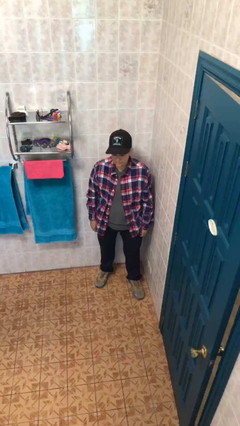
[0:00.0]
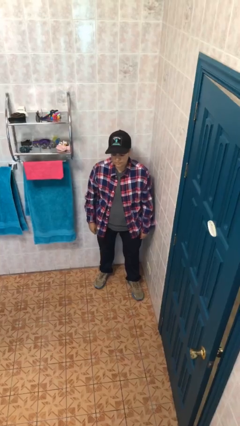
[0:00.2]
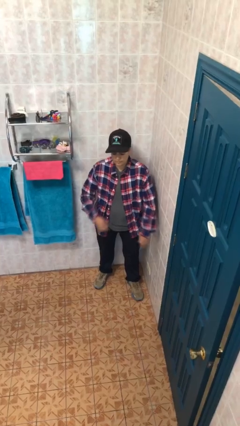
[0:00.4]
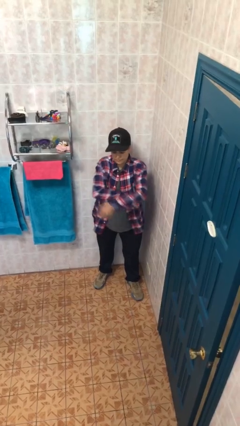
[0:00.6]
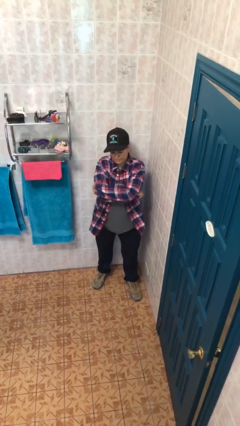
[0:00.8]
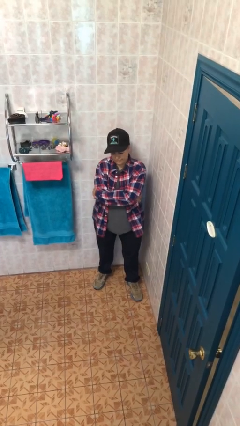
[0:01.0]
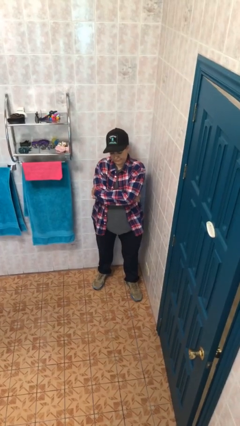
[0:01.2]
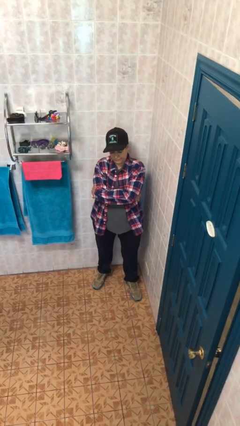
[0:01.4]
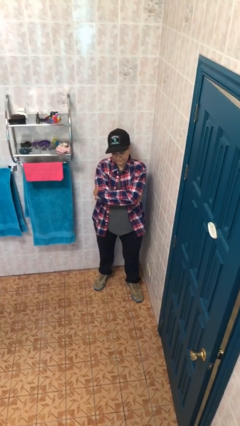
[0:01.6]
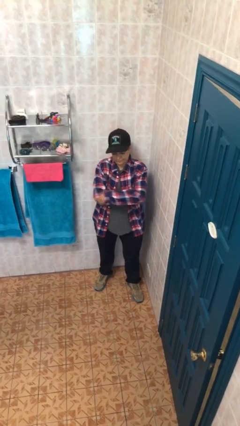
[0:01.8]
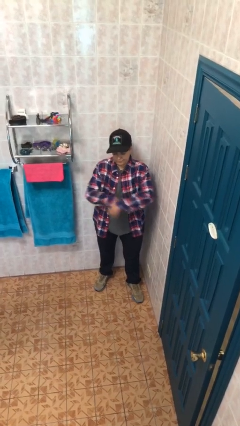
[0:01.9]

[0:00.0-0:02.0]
person crosses arms

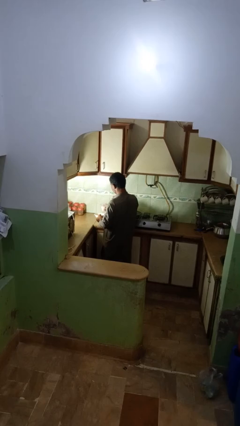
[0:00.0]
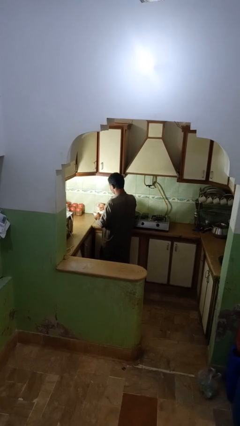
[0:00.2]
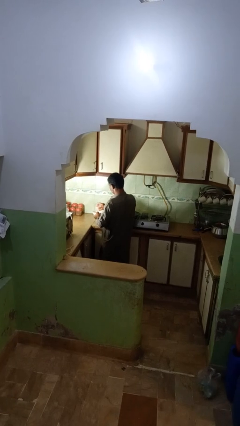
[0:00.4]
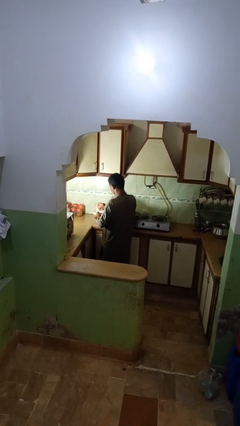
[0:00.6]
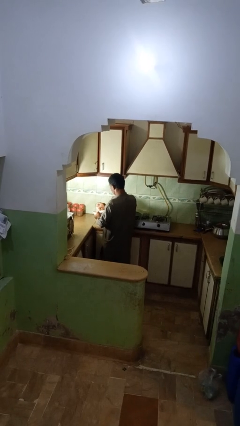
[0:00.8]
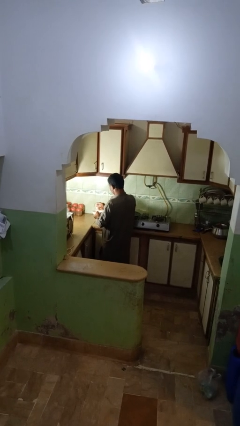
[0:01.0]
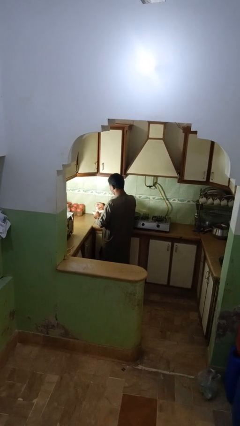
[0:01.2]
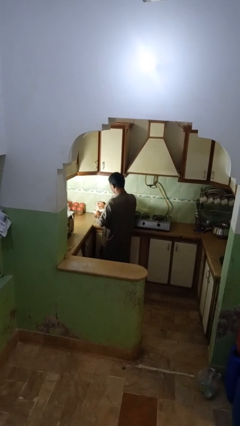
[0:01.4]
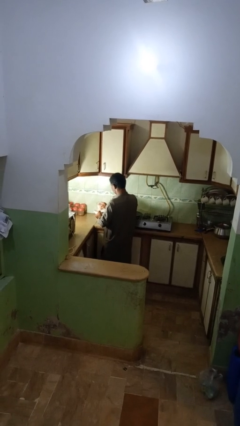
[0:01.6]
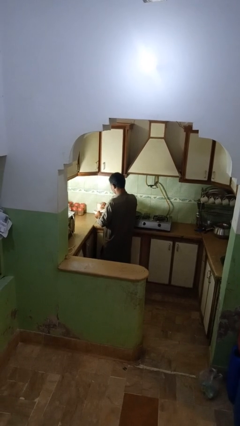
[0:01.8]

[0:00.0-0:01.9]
person pours into bowl

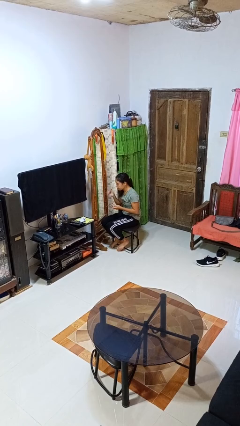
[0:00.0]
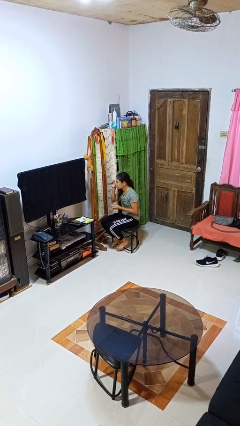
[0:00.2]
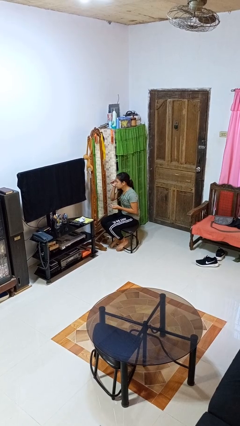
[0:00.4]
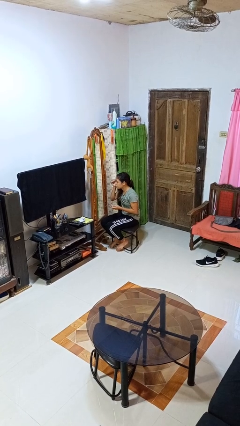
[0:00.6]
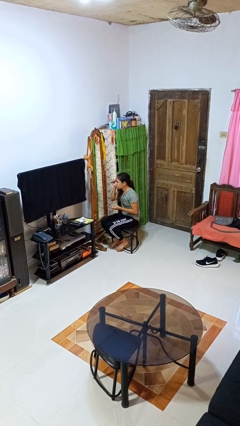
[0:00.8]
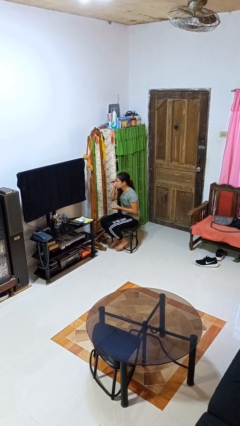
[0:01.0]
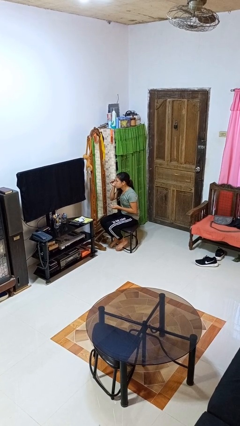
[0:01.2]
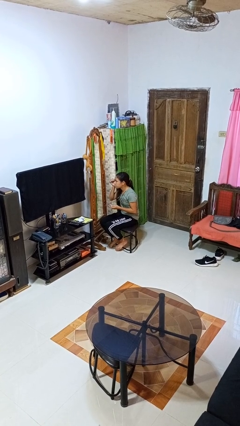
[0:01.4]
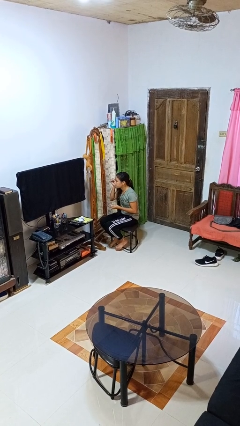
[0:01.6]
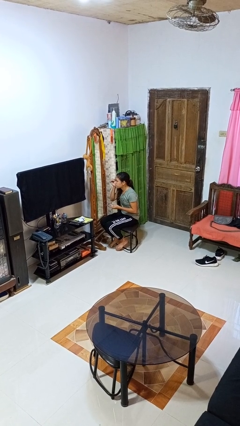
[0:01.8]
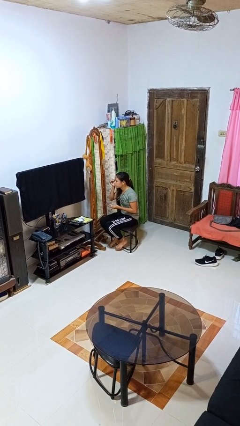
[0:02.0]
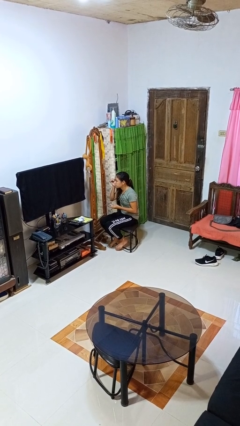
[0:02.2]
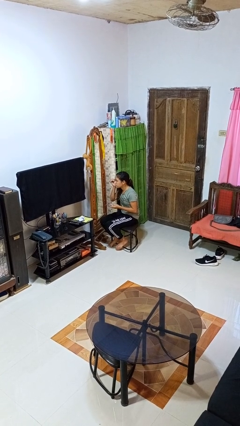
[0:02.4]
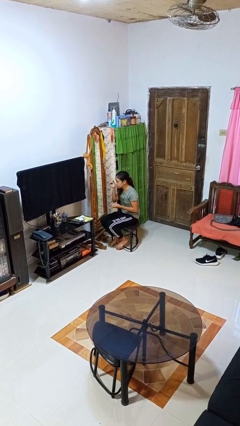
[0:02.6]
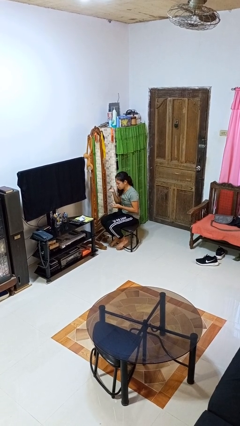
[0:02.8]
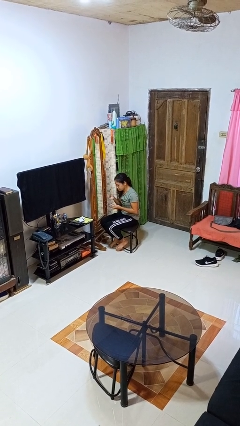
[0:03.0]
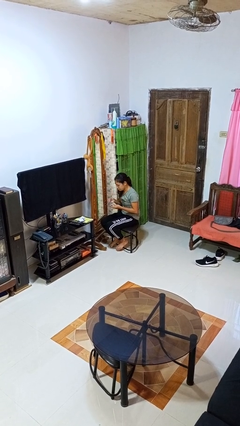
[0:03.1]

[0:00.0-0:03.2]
person applies eye makeup

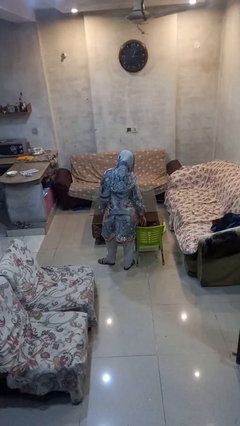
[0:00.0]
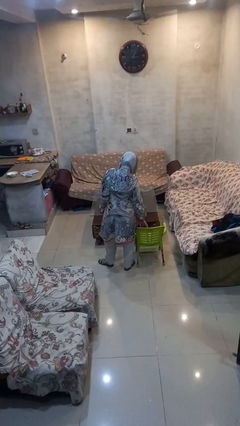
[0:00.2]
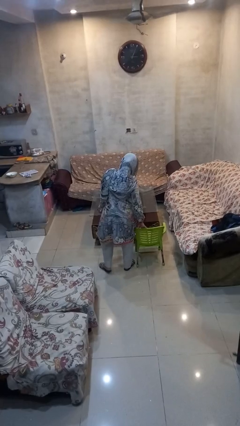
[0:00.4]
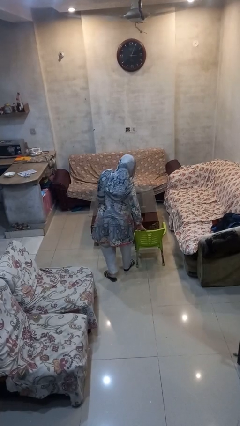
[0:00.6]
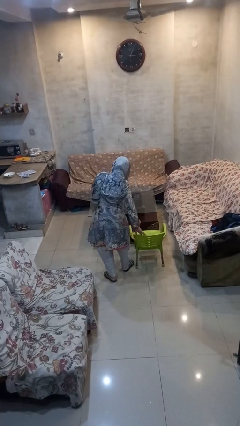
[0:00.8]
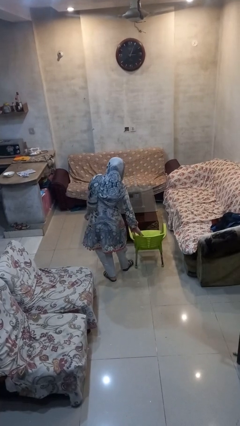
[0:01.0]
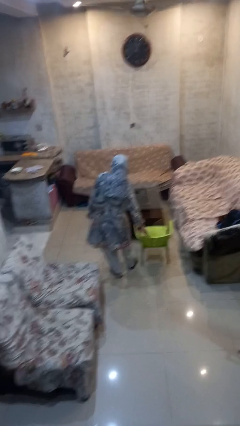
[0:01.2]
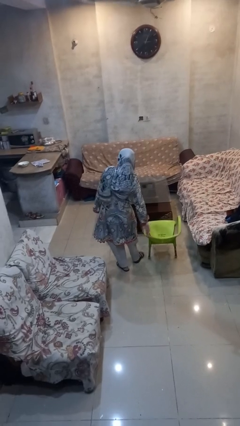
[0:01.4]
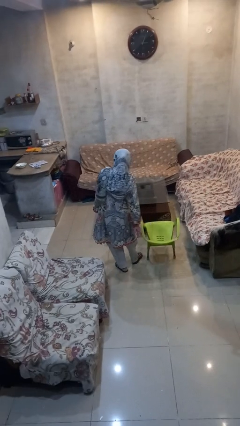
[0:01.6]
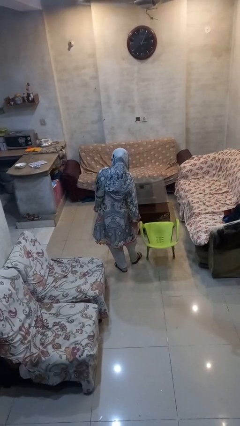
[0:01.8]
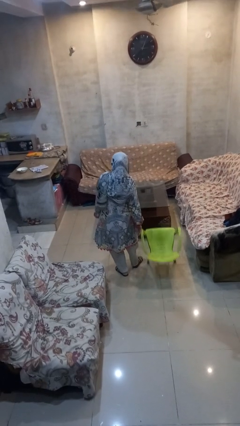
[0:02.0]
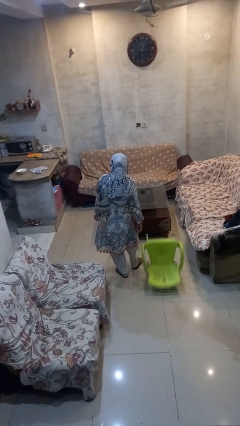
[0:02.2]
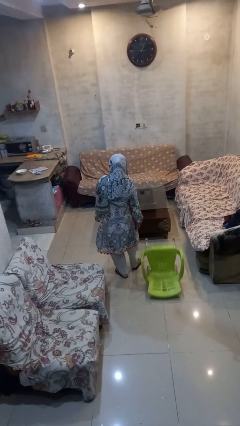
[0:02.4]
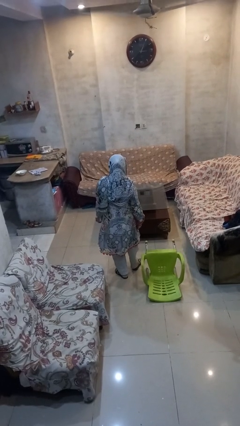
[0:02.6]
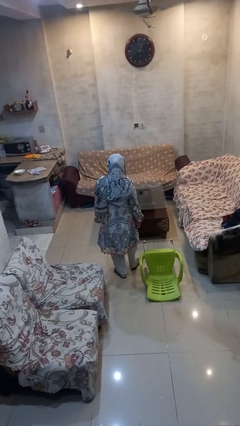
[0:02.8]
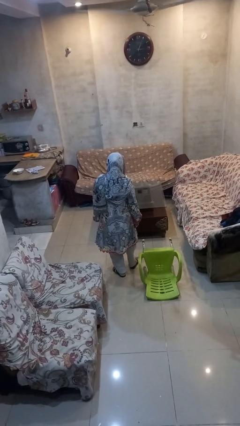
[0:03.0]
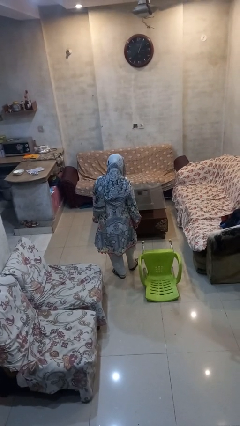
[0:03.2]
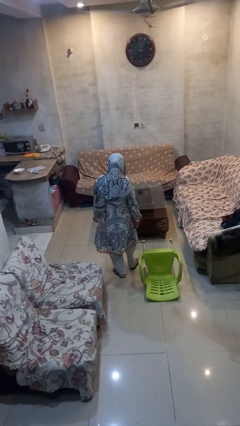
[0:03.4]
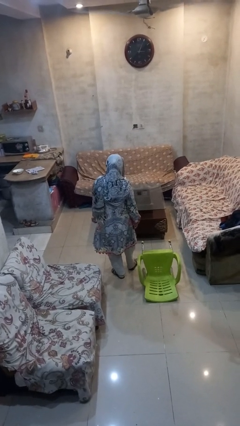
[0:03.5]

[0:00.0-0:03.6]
person knocks over furniture

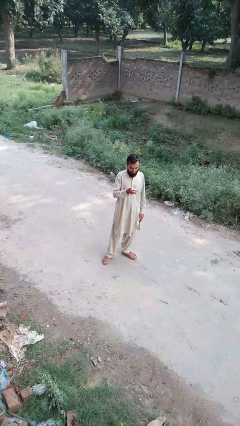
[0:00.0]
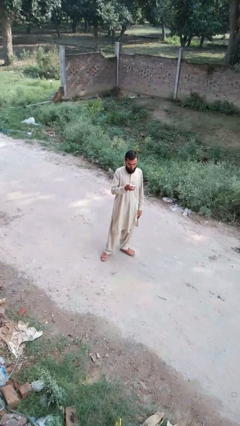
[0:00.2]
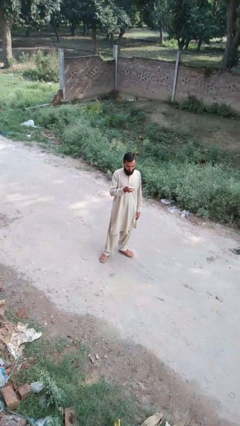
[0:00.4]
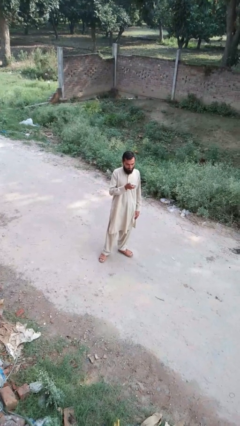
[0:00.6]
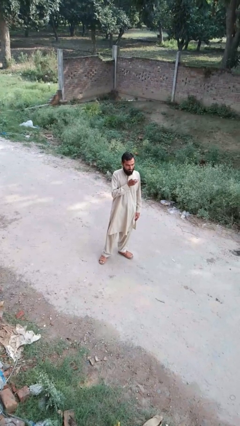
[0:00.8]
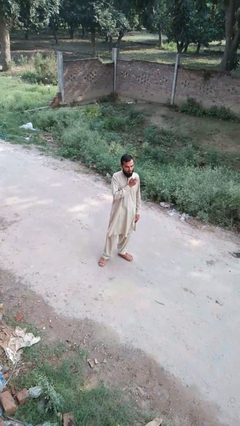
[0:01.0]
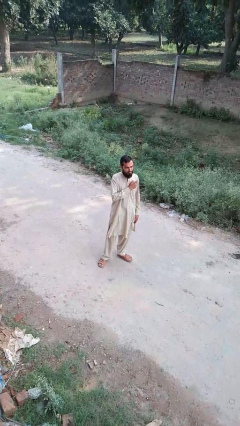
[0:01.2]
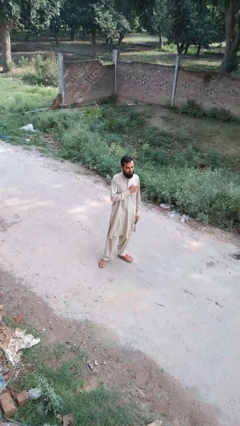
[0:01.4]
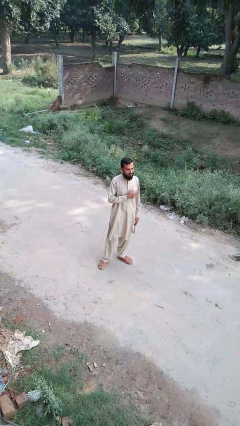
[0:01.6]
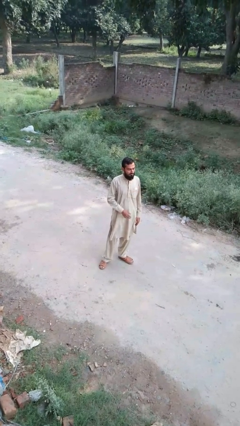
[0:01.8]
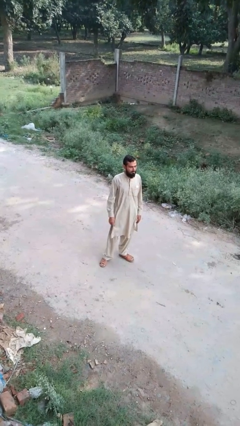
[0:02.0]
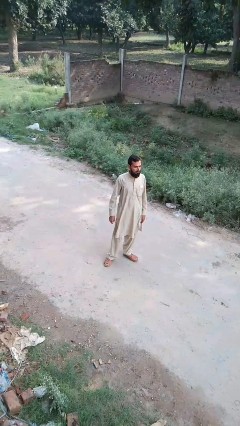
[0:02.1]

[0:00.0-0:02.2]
person puts phone into pocket

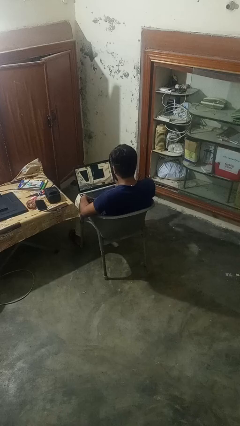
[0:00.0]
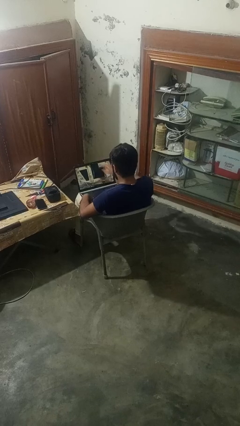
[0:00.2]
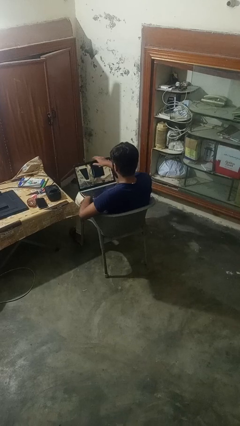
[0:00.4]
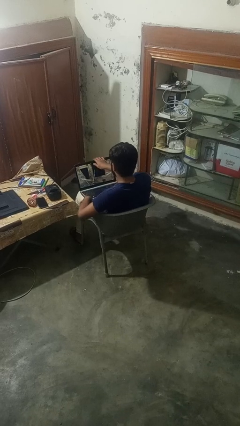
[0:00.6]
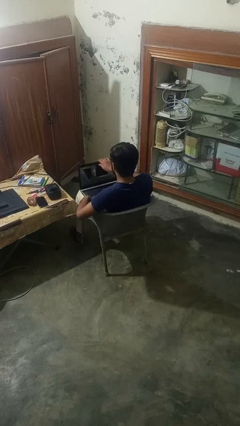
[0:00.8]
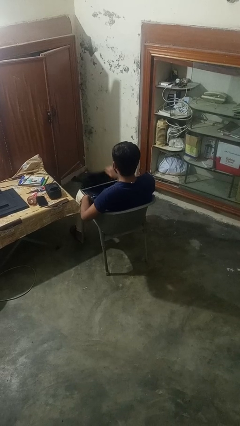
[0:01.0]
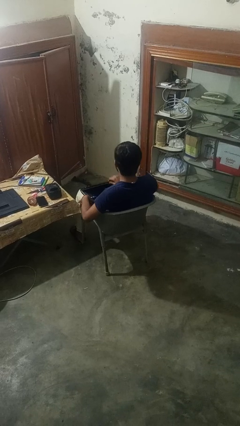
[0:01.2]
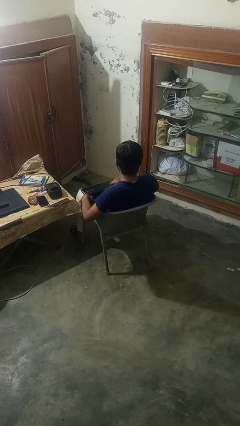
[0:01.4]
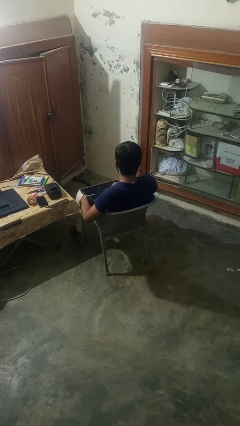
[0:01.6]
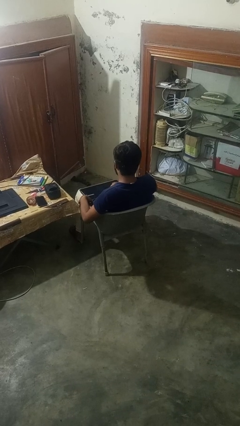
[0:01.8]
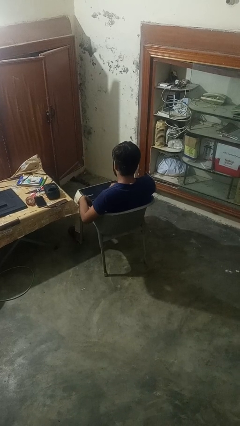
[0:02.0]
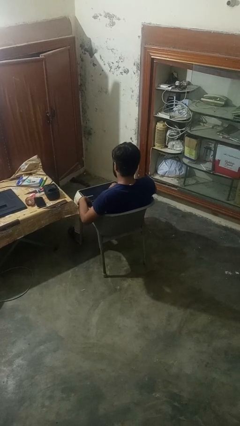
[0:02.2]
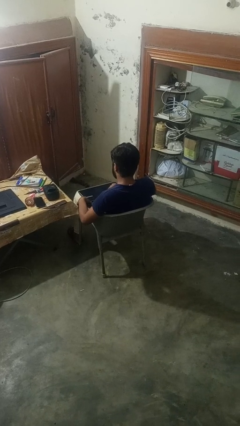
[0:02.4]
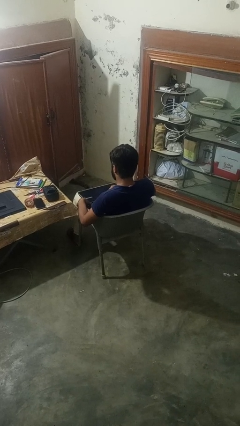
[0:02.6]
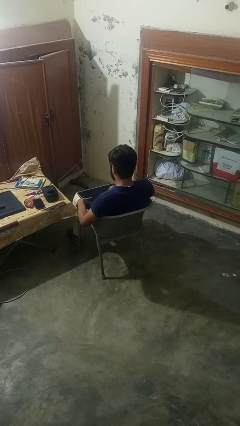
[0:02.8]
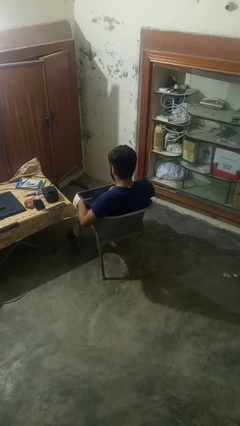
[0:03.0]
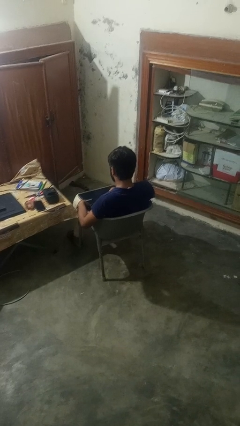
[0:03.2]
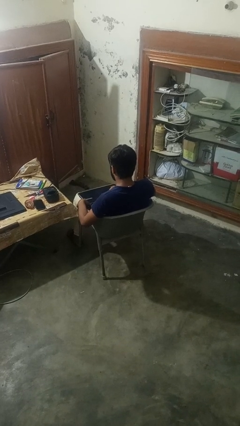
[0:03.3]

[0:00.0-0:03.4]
person closes laptop

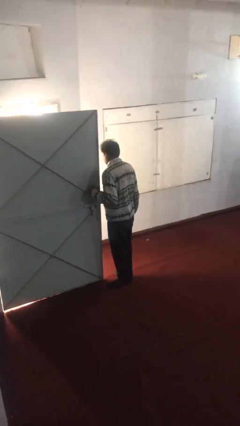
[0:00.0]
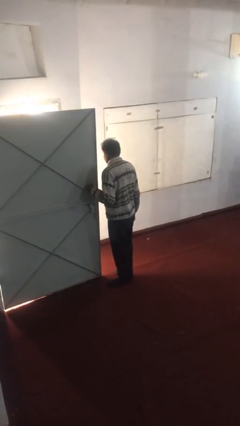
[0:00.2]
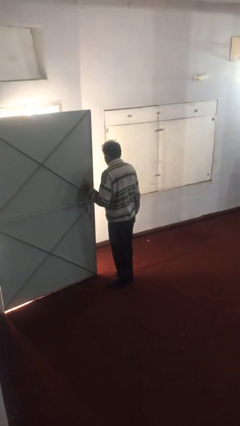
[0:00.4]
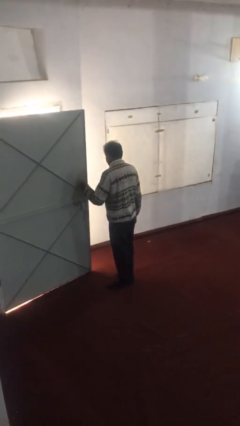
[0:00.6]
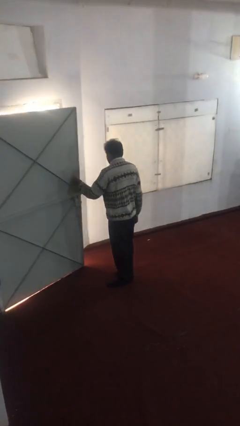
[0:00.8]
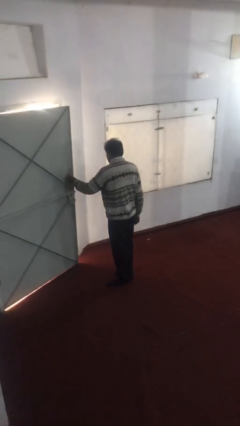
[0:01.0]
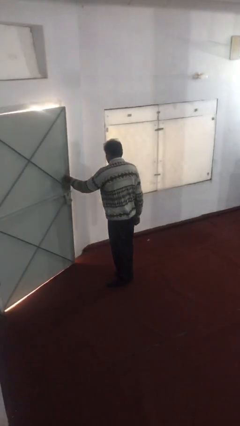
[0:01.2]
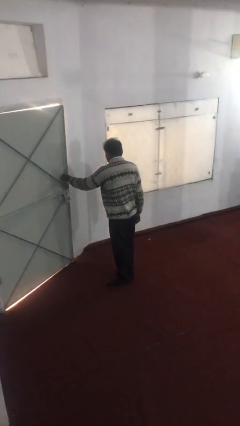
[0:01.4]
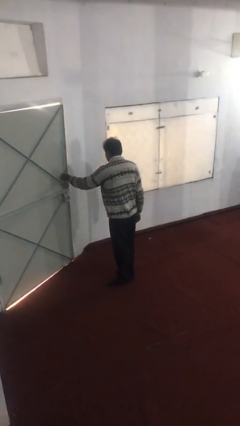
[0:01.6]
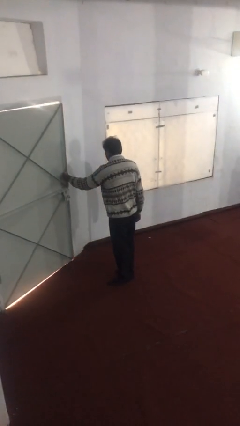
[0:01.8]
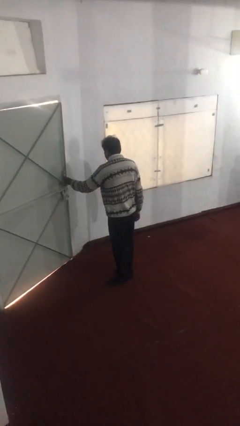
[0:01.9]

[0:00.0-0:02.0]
person closes facility door
